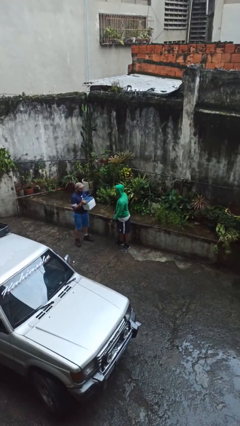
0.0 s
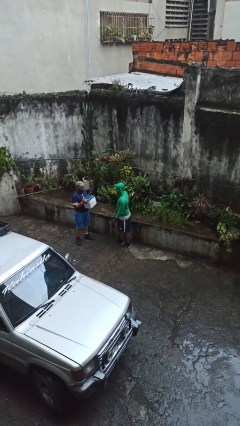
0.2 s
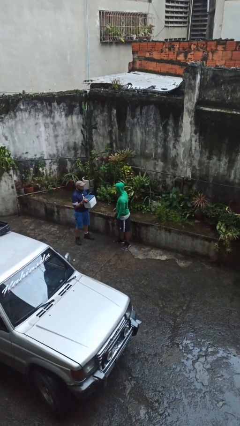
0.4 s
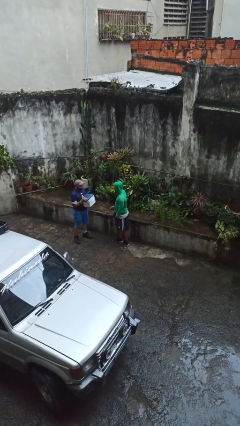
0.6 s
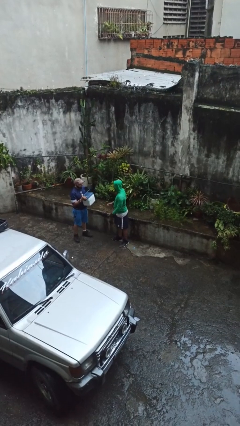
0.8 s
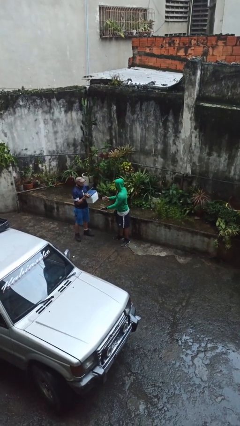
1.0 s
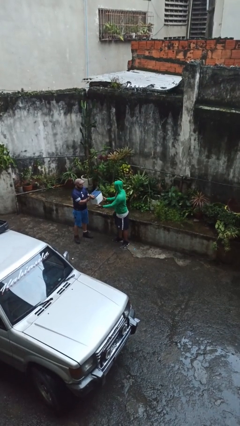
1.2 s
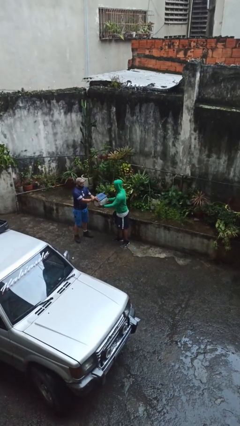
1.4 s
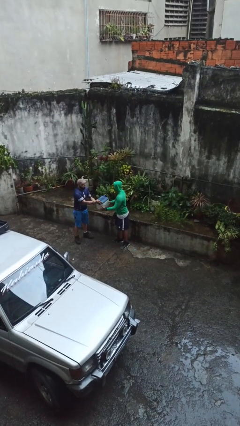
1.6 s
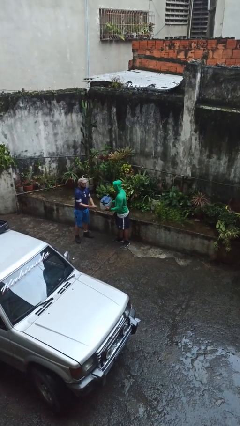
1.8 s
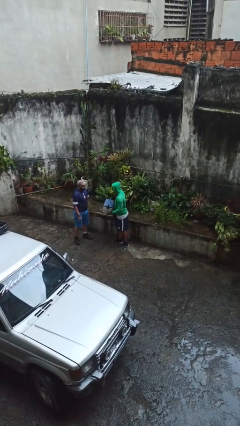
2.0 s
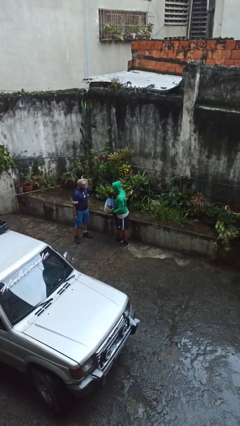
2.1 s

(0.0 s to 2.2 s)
person transfers object to person

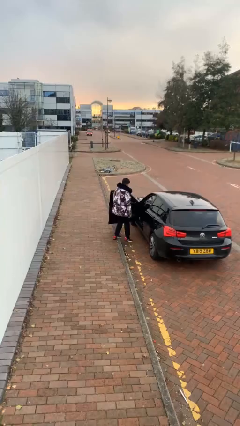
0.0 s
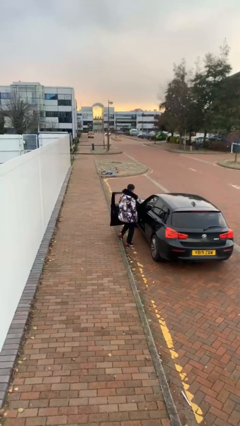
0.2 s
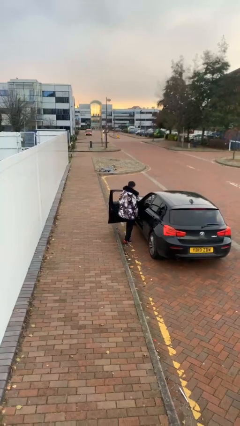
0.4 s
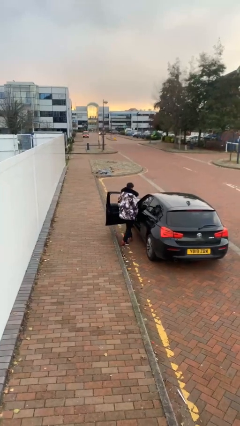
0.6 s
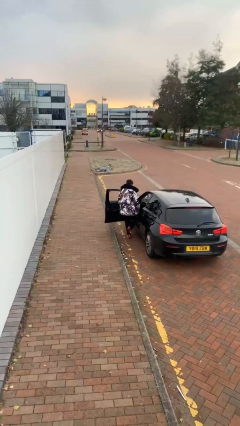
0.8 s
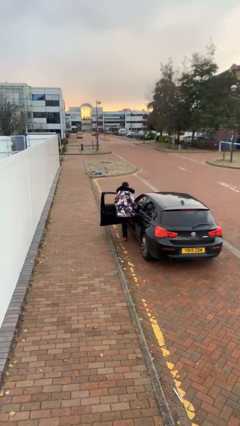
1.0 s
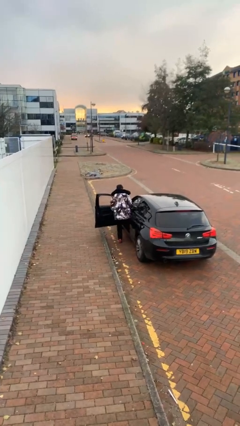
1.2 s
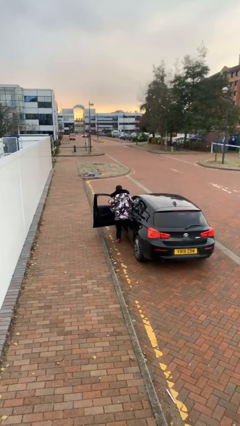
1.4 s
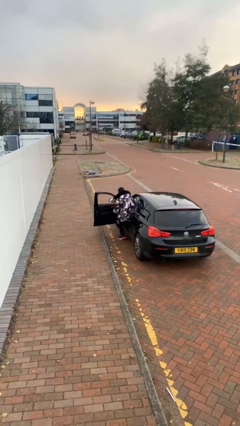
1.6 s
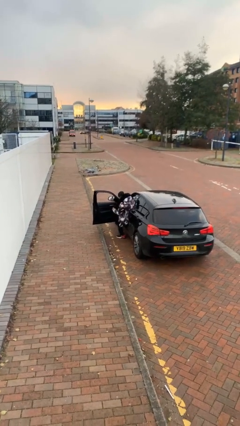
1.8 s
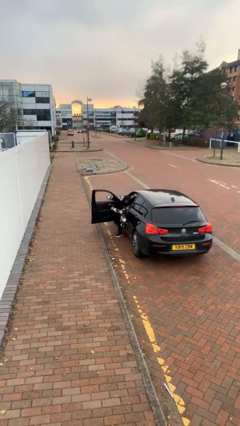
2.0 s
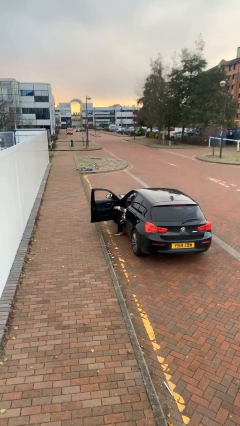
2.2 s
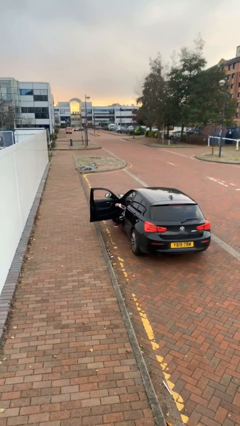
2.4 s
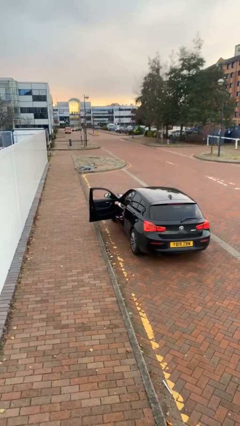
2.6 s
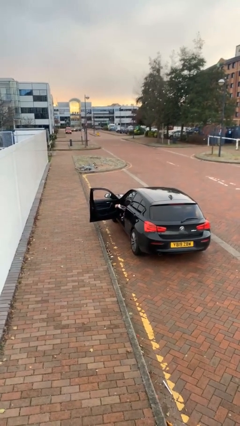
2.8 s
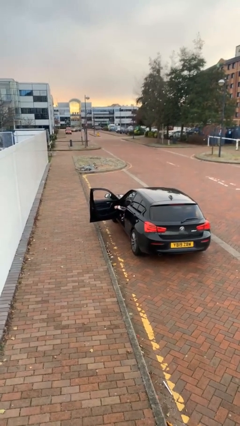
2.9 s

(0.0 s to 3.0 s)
person enters car

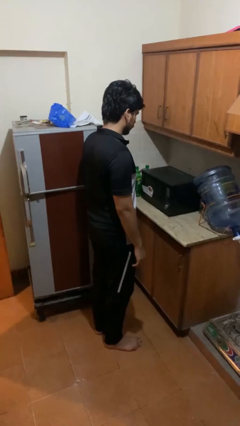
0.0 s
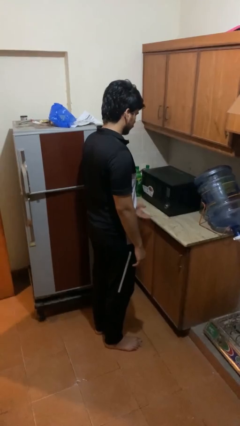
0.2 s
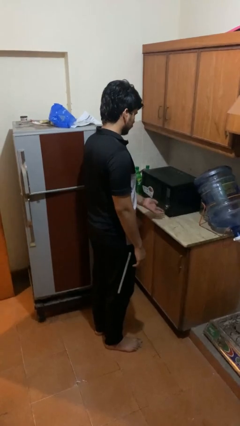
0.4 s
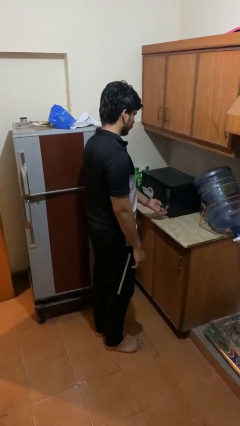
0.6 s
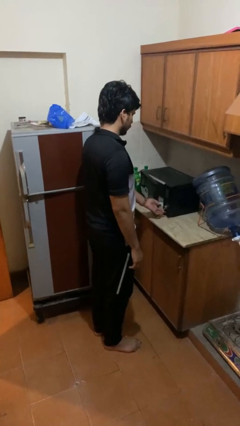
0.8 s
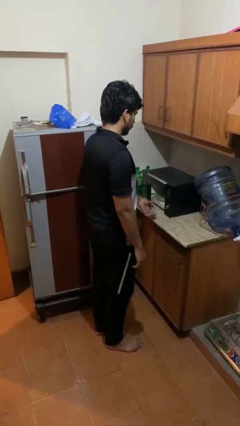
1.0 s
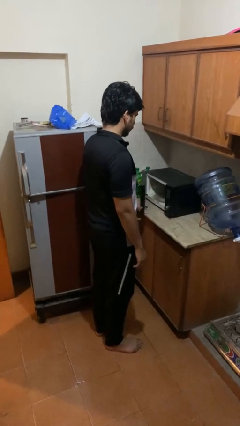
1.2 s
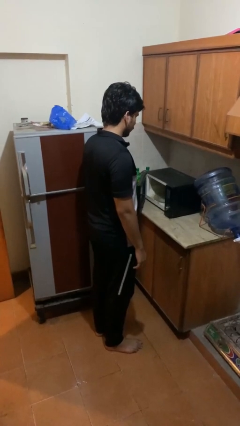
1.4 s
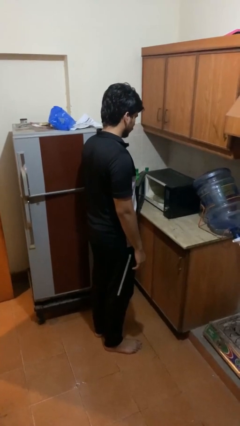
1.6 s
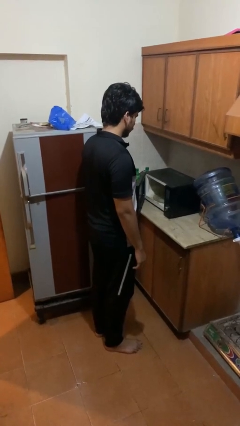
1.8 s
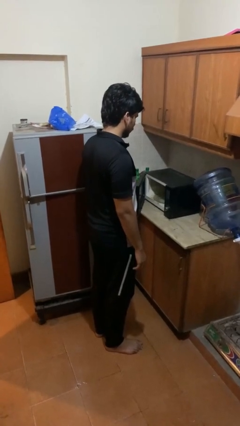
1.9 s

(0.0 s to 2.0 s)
person opens oven door

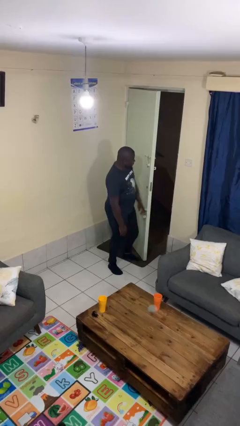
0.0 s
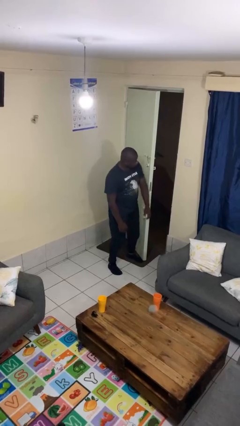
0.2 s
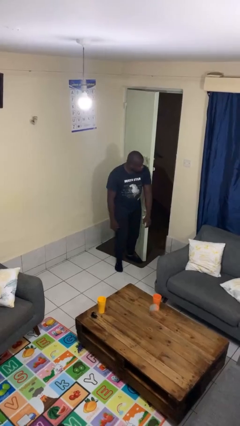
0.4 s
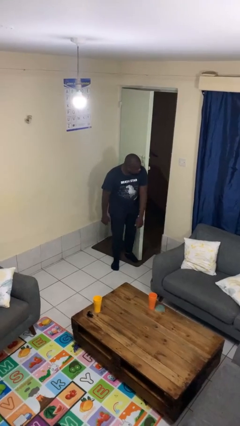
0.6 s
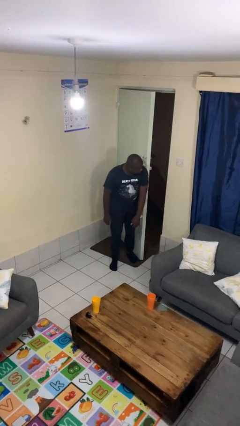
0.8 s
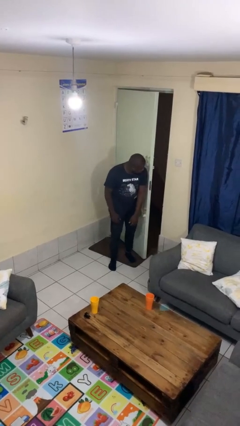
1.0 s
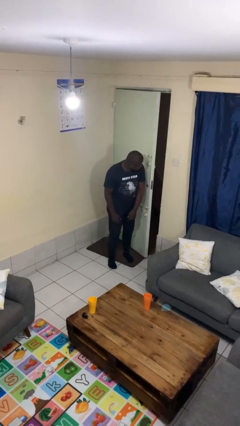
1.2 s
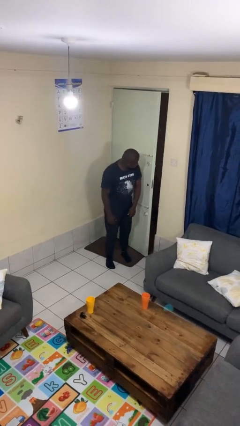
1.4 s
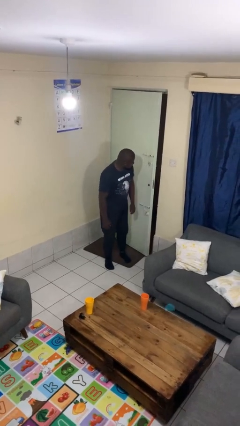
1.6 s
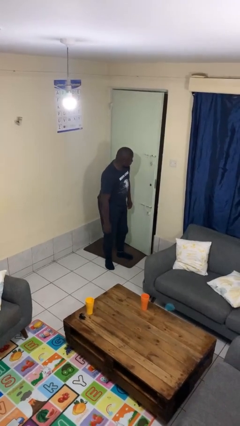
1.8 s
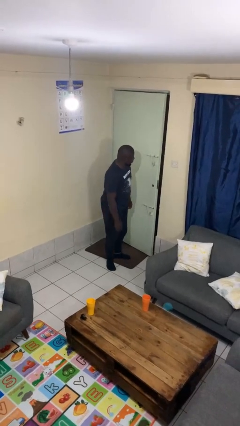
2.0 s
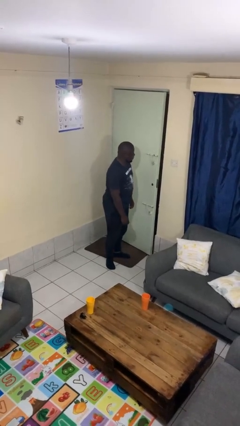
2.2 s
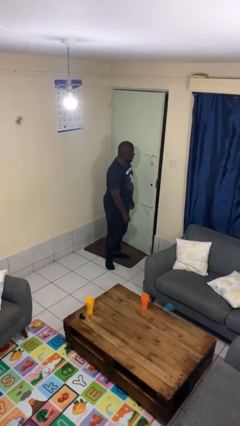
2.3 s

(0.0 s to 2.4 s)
person closes door with hip

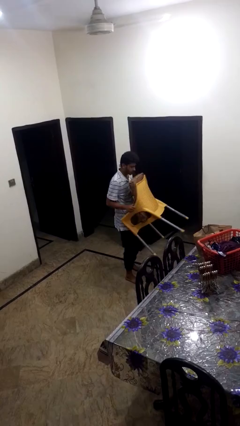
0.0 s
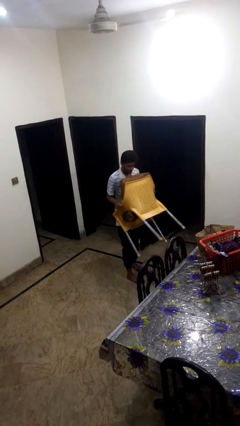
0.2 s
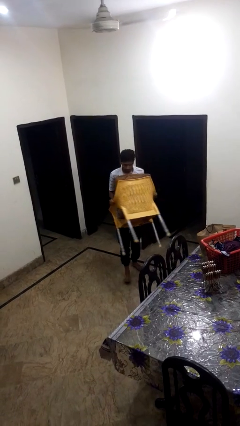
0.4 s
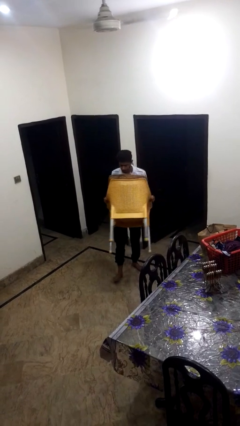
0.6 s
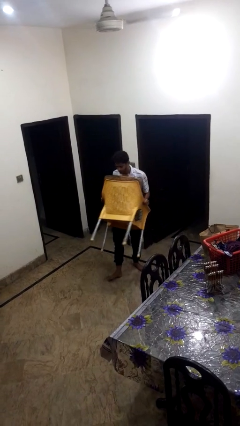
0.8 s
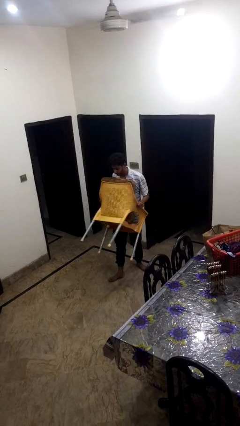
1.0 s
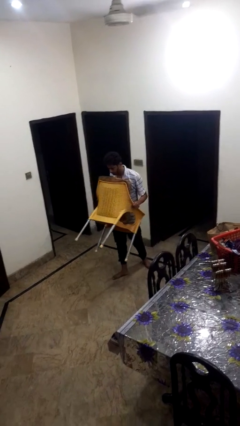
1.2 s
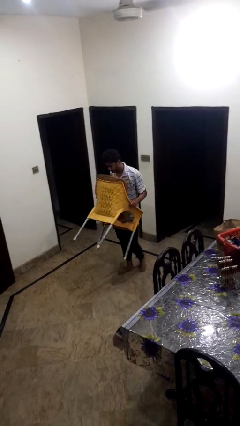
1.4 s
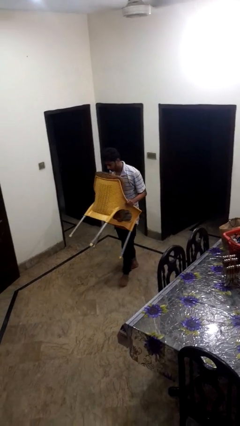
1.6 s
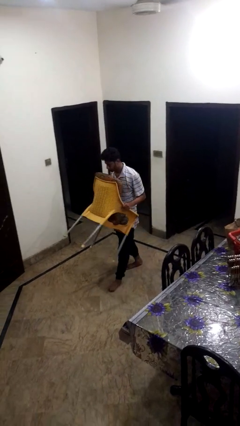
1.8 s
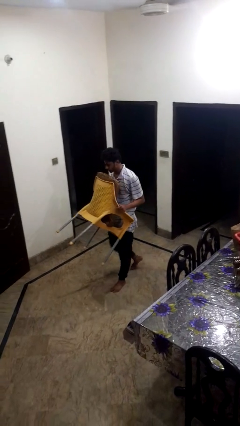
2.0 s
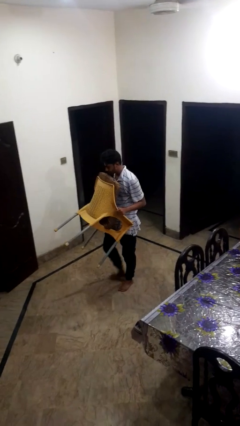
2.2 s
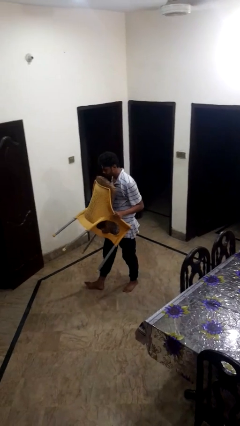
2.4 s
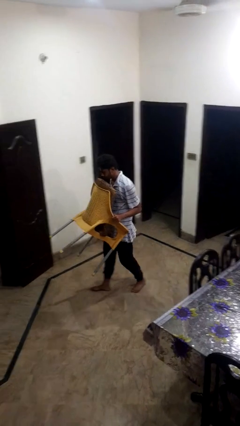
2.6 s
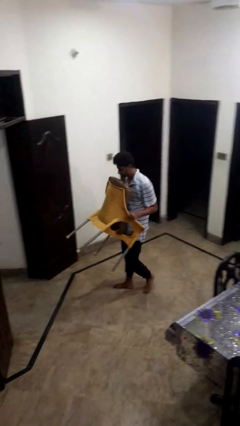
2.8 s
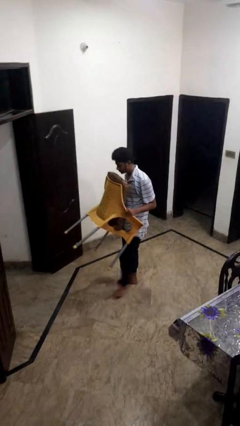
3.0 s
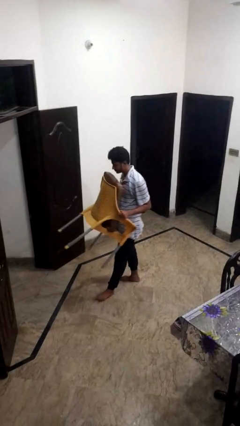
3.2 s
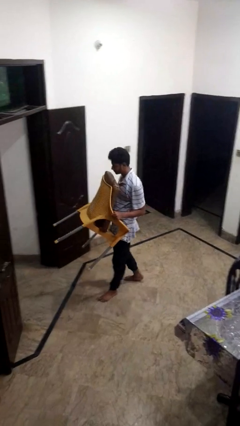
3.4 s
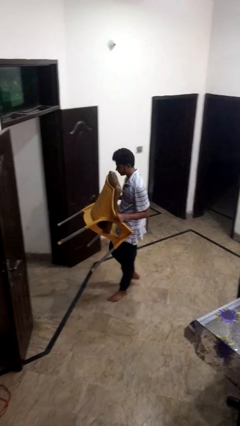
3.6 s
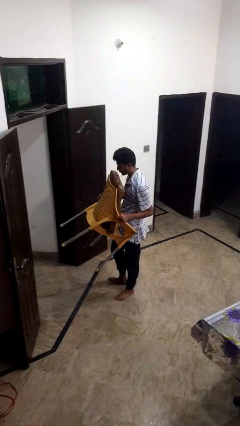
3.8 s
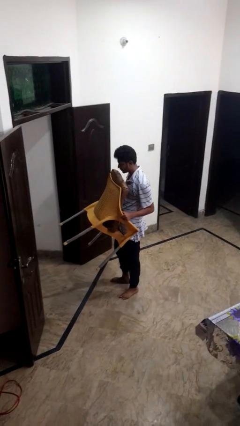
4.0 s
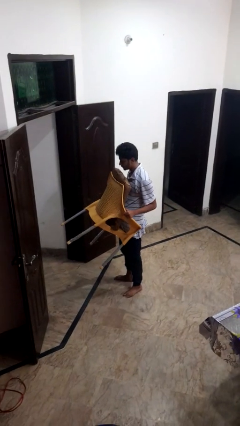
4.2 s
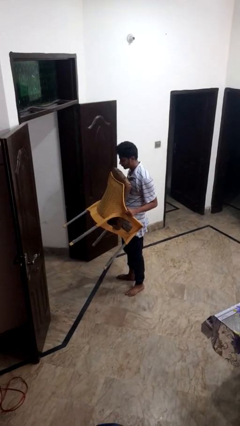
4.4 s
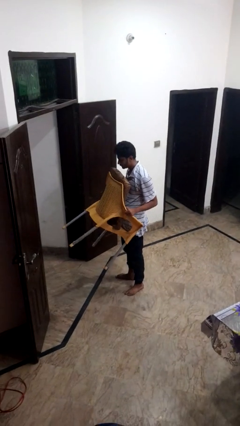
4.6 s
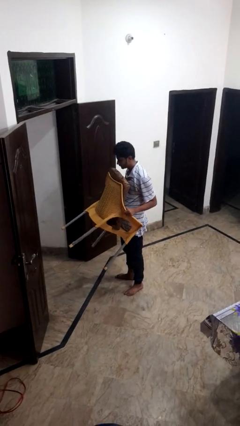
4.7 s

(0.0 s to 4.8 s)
person carries furniture

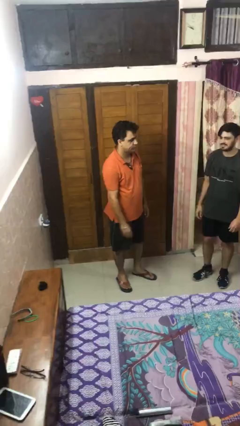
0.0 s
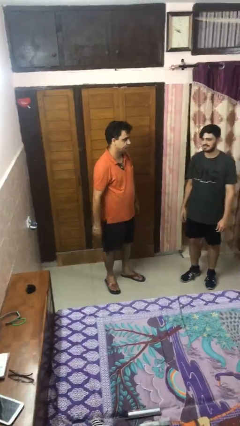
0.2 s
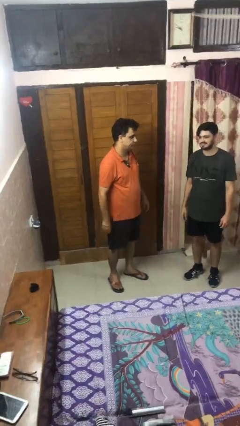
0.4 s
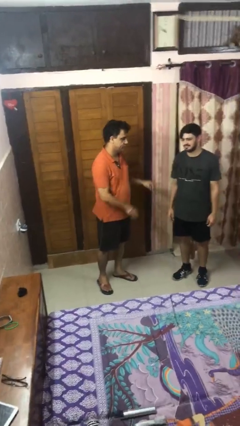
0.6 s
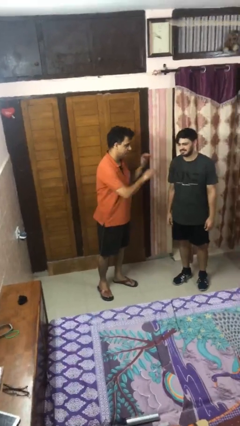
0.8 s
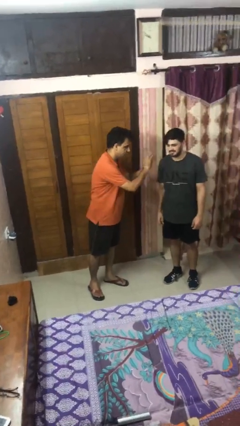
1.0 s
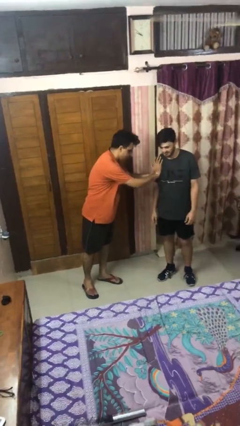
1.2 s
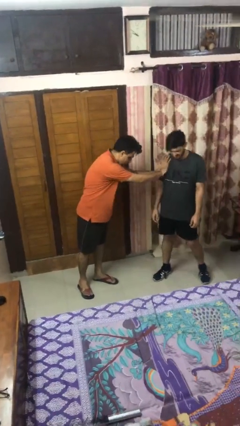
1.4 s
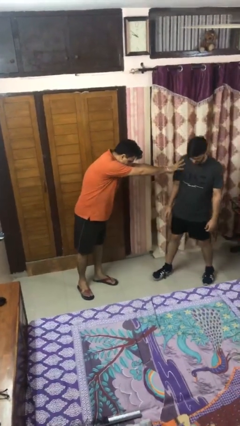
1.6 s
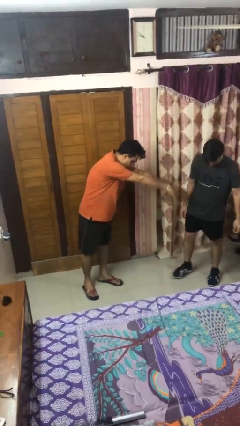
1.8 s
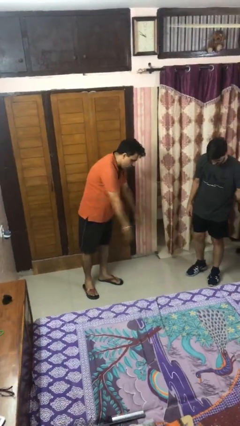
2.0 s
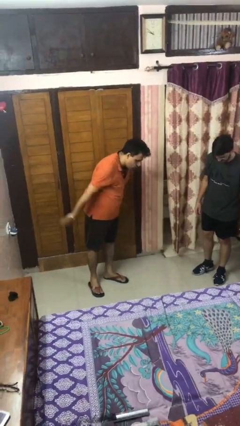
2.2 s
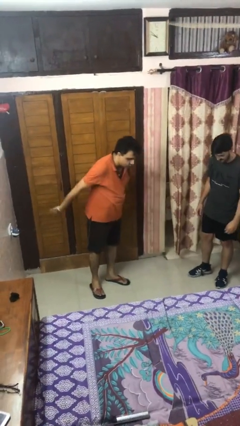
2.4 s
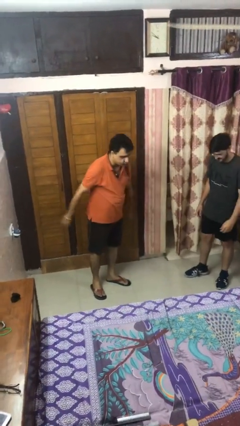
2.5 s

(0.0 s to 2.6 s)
person shoves person

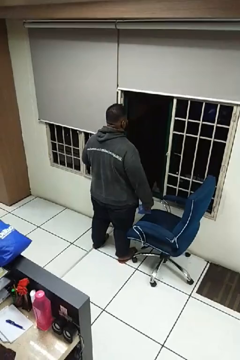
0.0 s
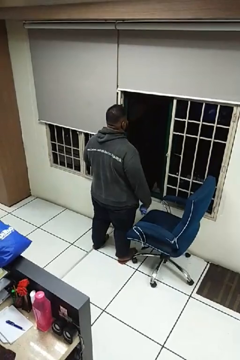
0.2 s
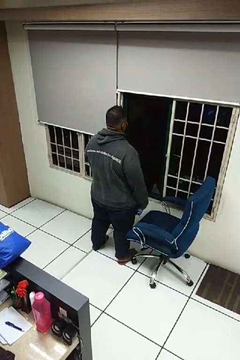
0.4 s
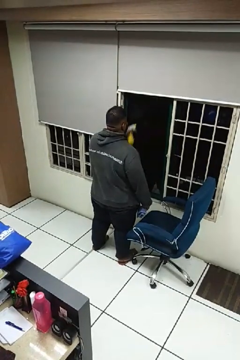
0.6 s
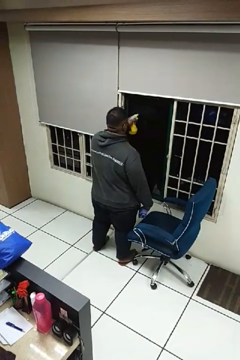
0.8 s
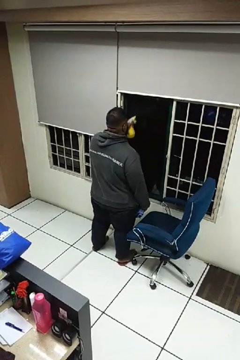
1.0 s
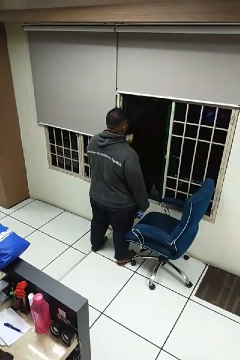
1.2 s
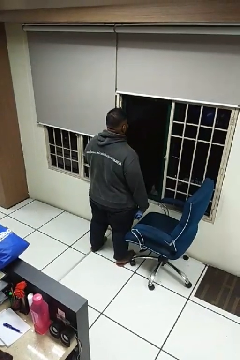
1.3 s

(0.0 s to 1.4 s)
person sprays from bottle
